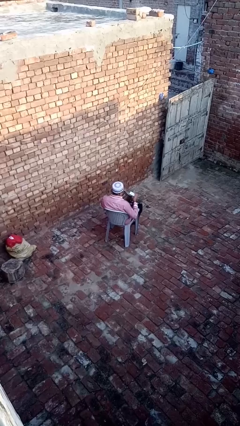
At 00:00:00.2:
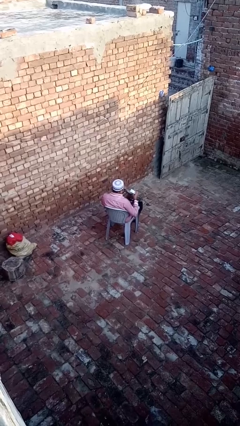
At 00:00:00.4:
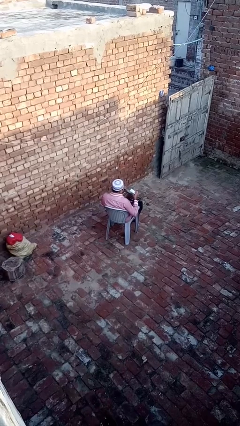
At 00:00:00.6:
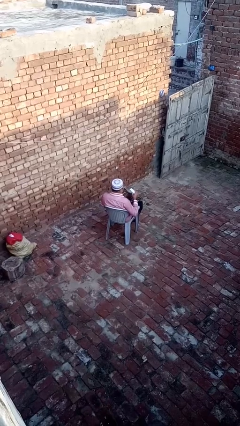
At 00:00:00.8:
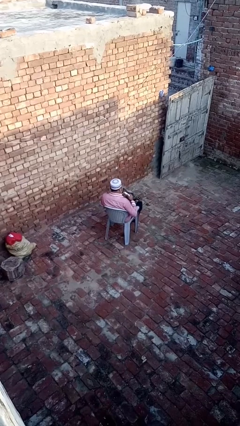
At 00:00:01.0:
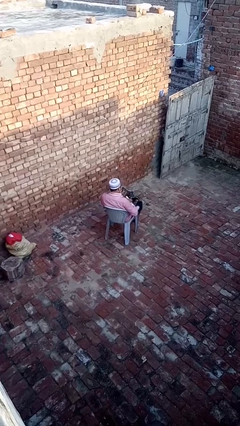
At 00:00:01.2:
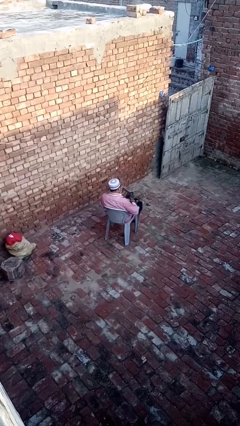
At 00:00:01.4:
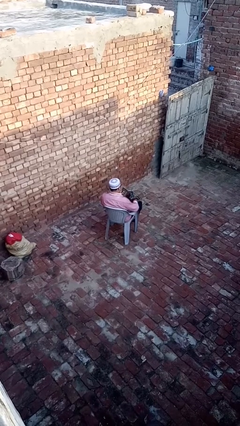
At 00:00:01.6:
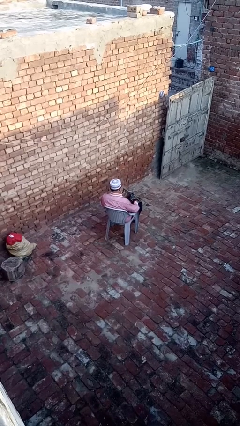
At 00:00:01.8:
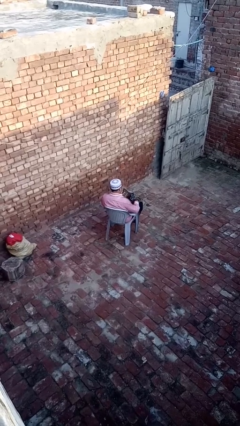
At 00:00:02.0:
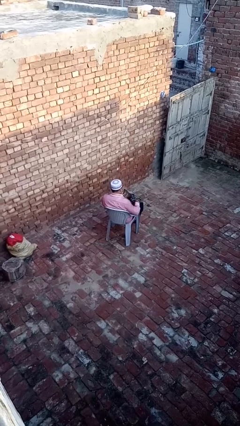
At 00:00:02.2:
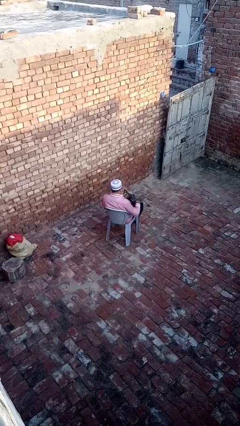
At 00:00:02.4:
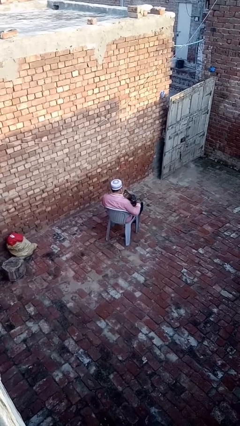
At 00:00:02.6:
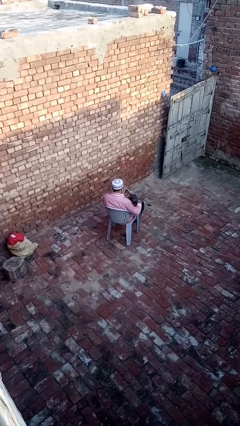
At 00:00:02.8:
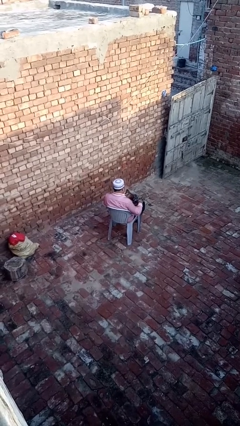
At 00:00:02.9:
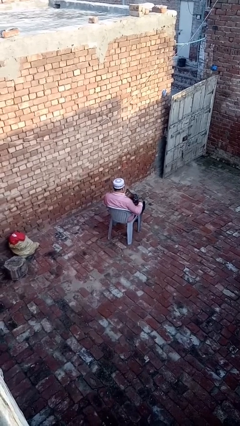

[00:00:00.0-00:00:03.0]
person puts object into purse

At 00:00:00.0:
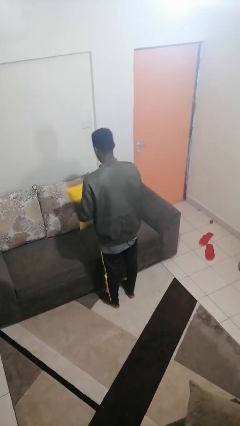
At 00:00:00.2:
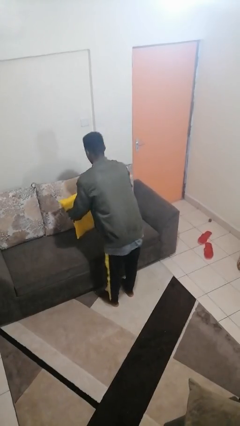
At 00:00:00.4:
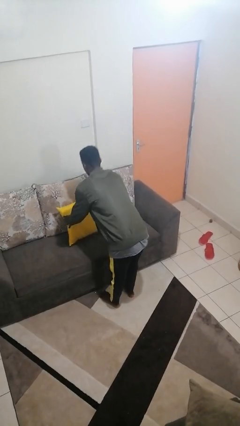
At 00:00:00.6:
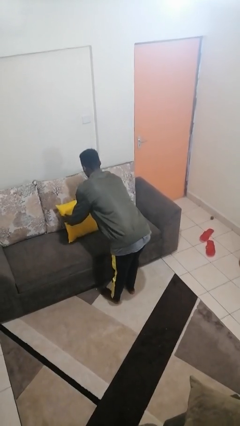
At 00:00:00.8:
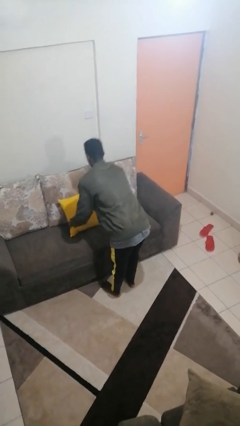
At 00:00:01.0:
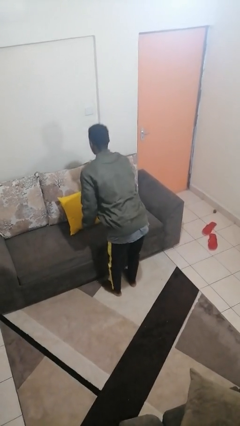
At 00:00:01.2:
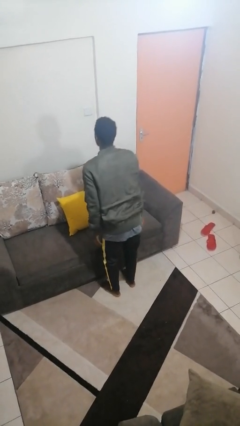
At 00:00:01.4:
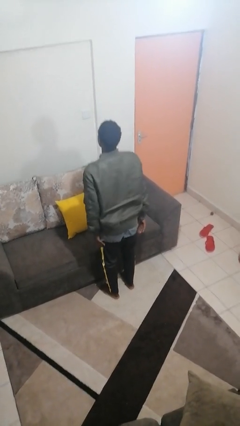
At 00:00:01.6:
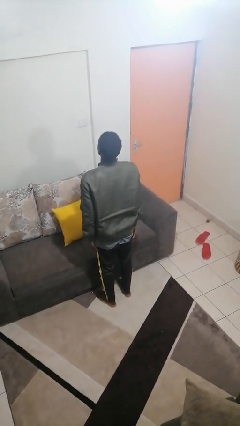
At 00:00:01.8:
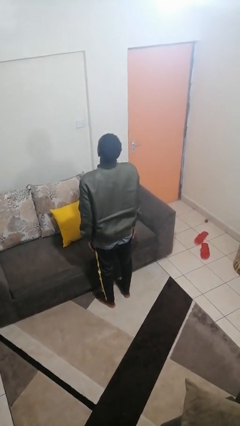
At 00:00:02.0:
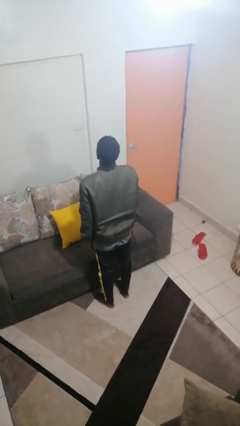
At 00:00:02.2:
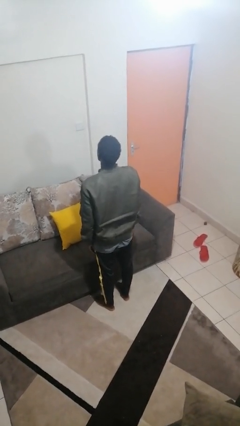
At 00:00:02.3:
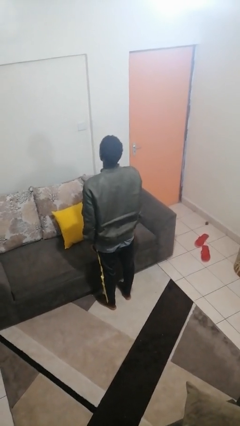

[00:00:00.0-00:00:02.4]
person puts down object on couch

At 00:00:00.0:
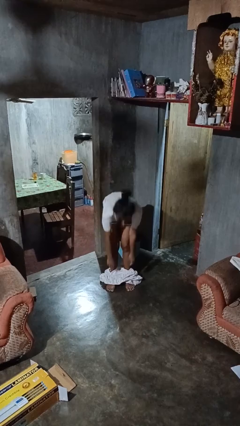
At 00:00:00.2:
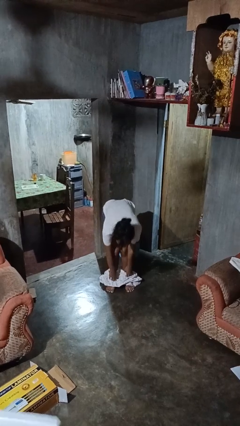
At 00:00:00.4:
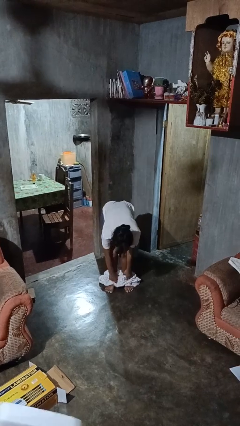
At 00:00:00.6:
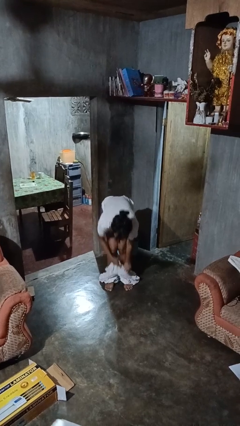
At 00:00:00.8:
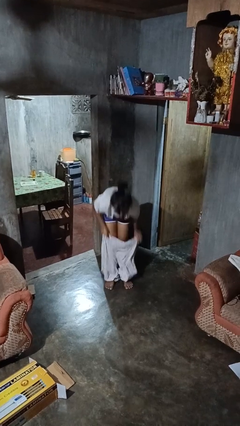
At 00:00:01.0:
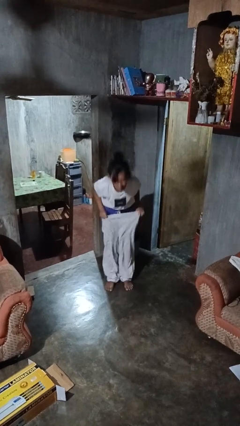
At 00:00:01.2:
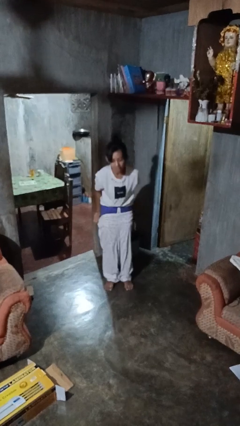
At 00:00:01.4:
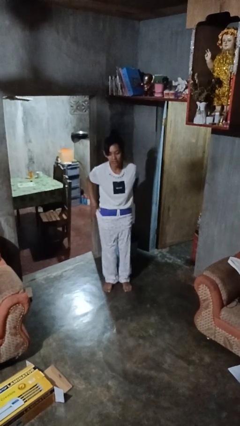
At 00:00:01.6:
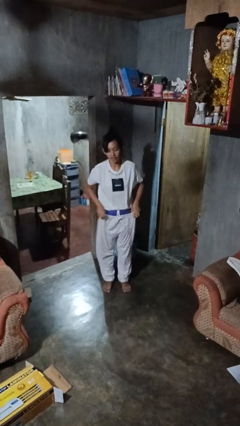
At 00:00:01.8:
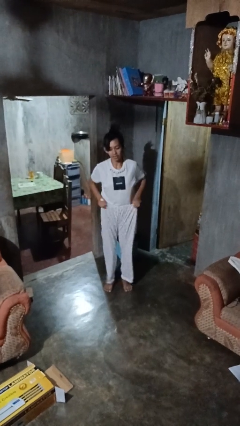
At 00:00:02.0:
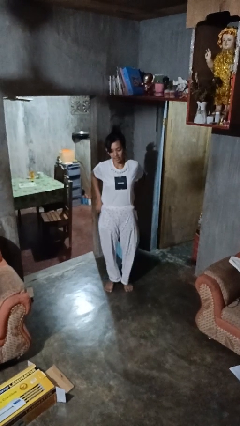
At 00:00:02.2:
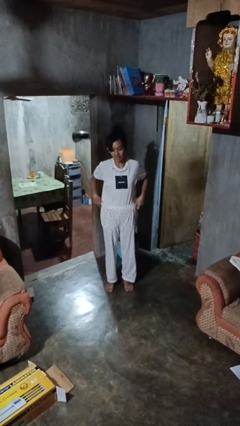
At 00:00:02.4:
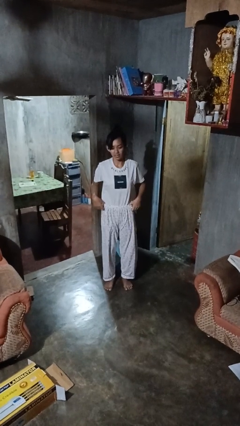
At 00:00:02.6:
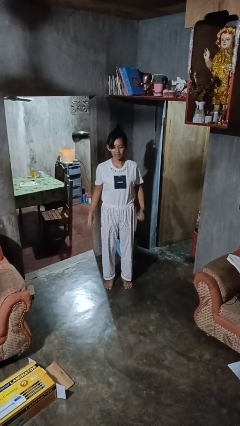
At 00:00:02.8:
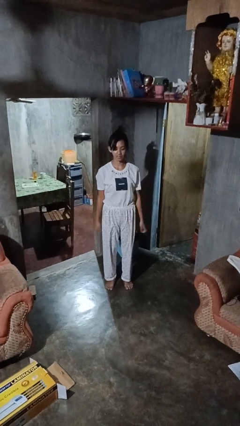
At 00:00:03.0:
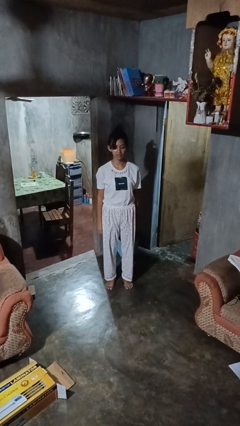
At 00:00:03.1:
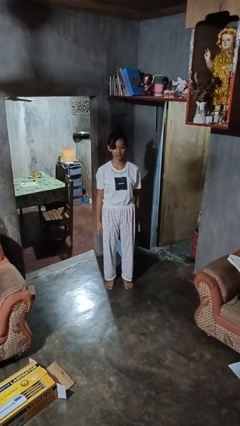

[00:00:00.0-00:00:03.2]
person puts on pants

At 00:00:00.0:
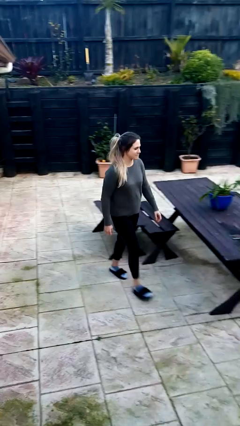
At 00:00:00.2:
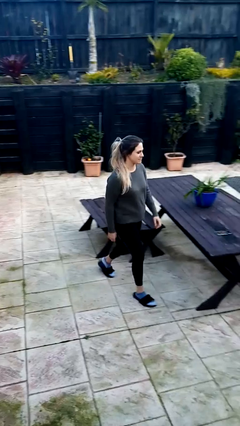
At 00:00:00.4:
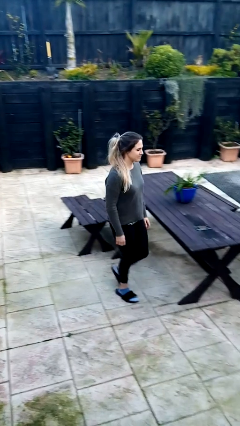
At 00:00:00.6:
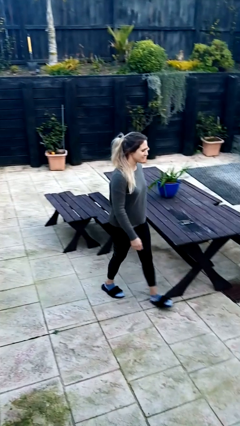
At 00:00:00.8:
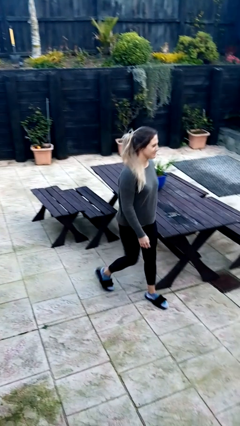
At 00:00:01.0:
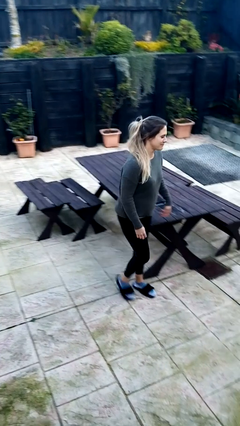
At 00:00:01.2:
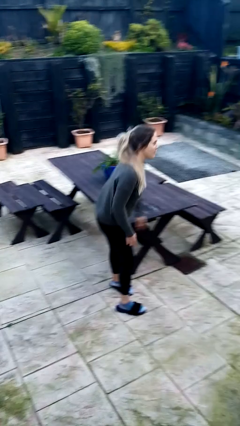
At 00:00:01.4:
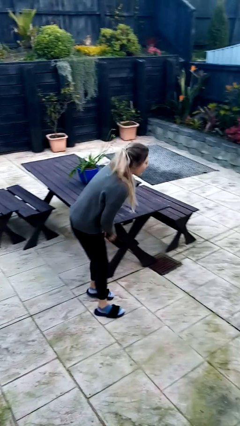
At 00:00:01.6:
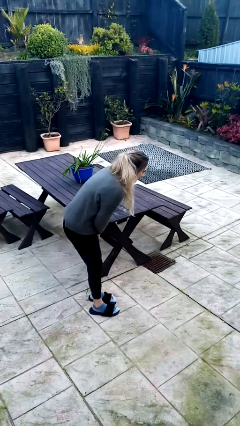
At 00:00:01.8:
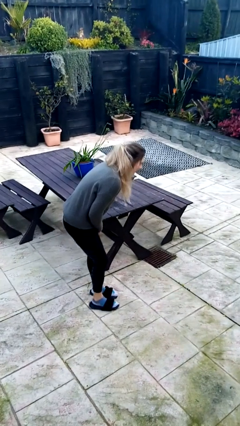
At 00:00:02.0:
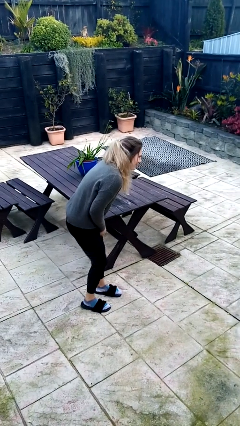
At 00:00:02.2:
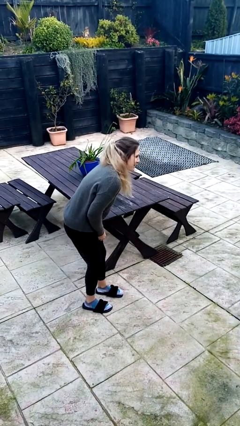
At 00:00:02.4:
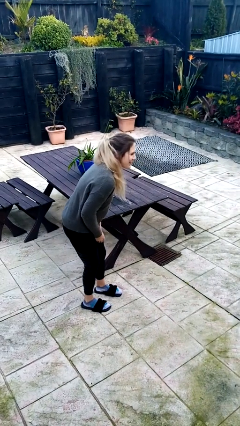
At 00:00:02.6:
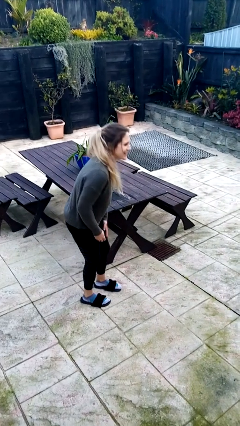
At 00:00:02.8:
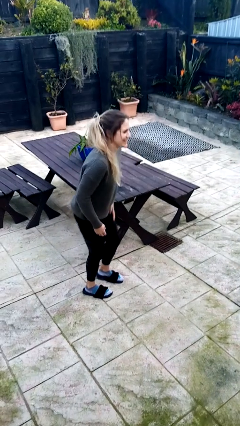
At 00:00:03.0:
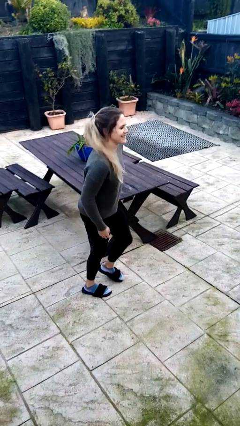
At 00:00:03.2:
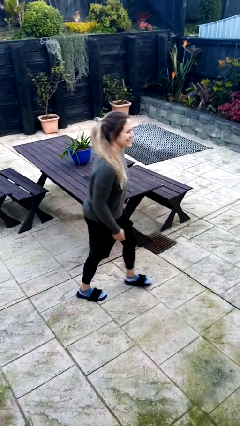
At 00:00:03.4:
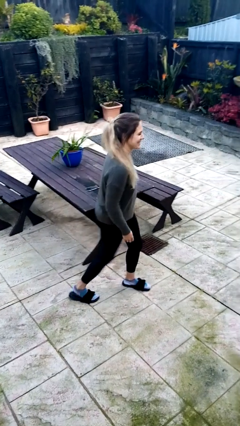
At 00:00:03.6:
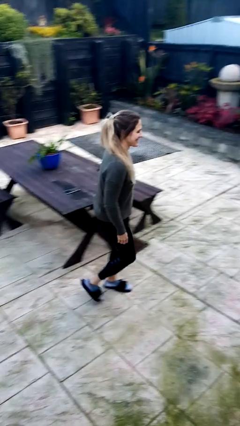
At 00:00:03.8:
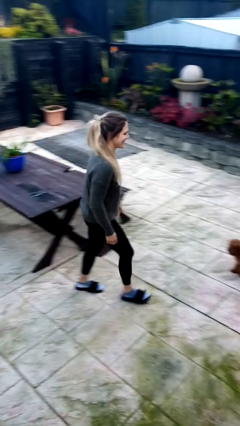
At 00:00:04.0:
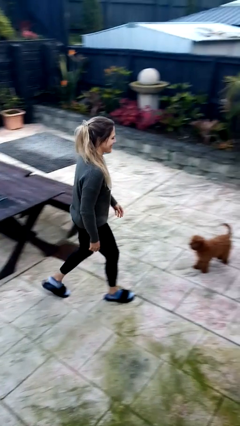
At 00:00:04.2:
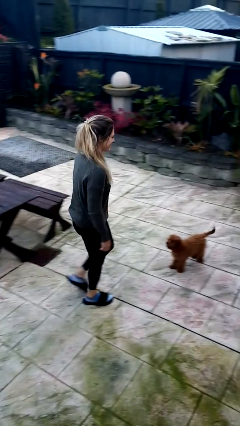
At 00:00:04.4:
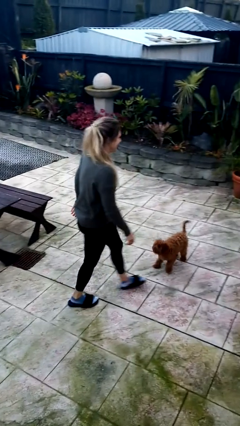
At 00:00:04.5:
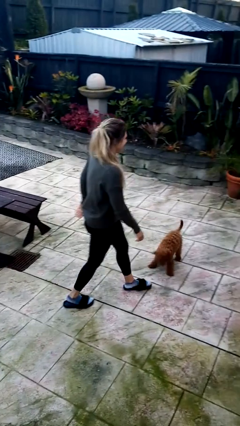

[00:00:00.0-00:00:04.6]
person bumps into table

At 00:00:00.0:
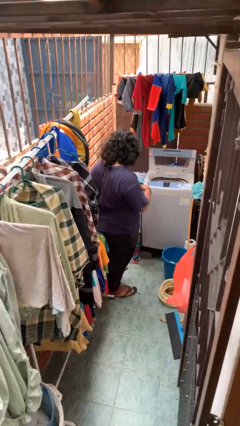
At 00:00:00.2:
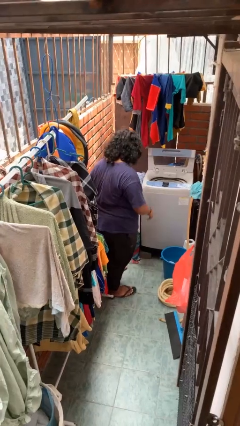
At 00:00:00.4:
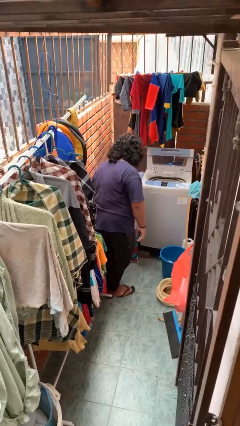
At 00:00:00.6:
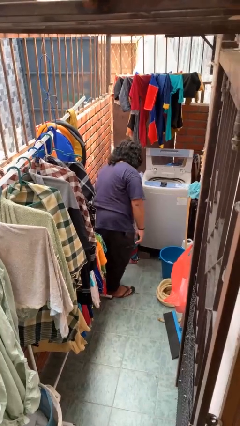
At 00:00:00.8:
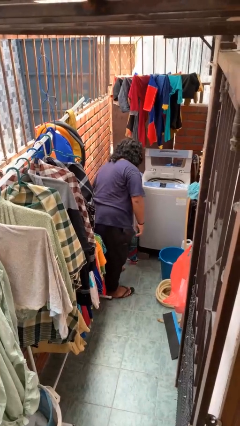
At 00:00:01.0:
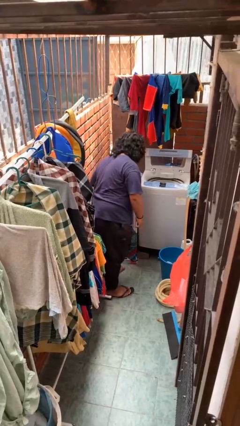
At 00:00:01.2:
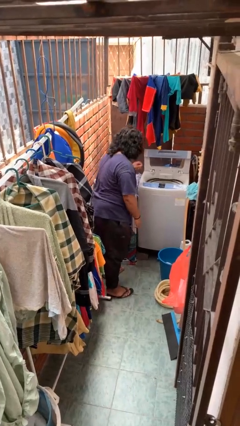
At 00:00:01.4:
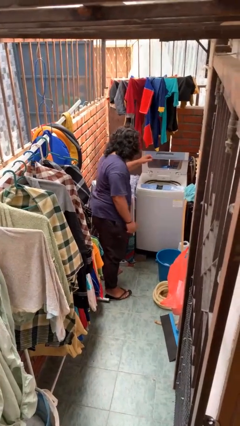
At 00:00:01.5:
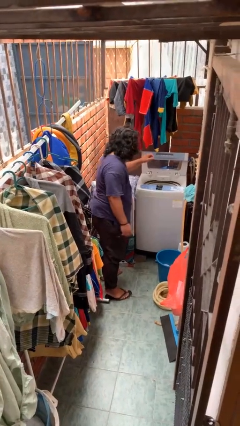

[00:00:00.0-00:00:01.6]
person loads dryer

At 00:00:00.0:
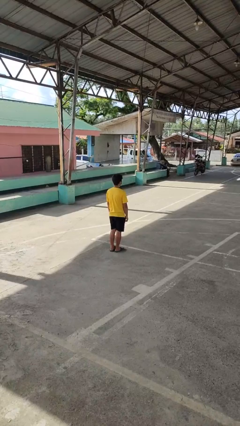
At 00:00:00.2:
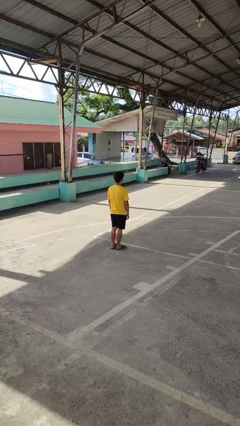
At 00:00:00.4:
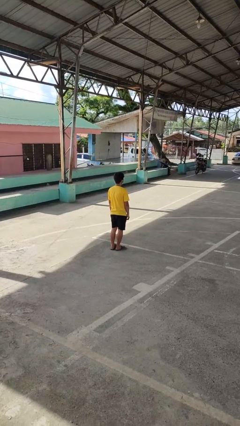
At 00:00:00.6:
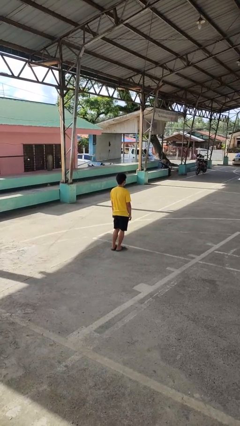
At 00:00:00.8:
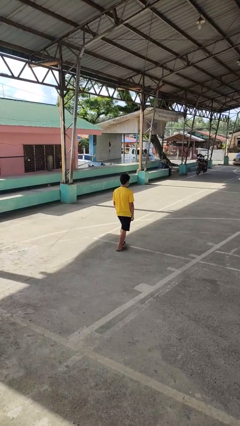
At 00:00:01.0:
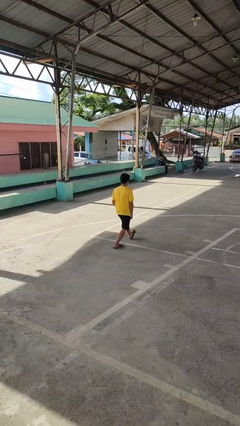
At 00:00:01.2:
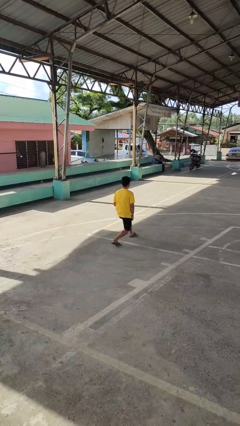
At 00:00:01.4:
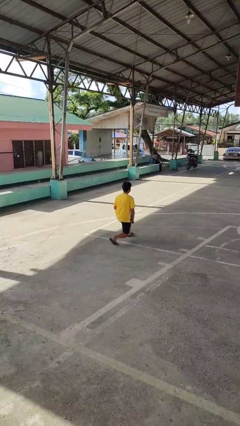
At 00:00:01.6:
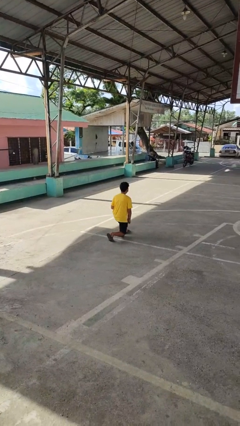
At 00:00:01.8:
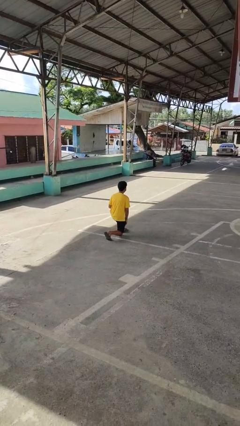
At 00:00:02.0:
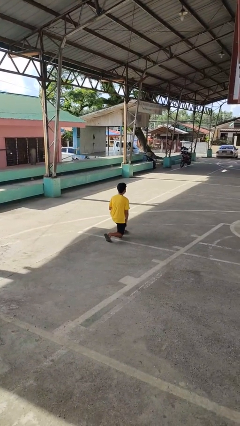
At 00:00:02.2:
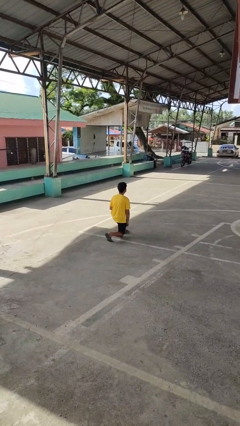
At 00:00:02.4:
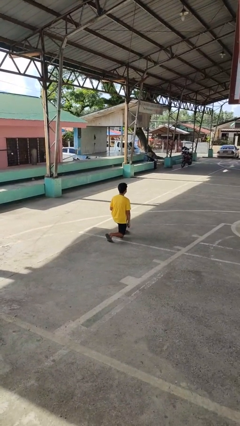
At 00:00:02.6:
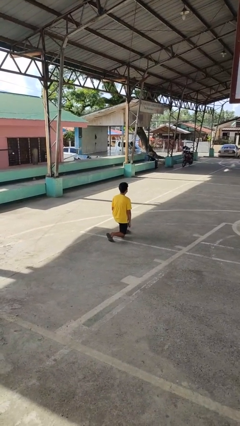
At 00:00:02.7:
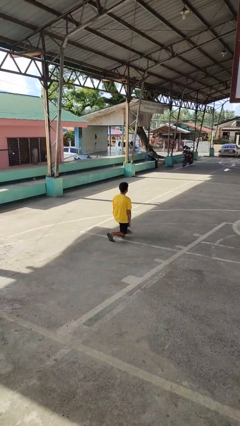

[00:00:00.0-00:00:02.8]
person kneels
